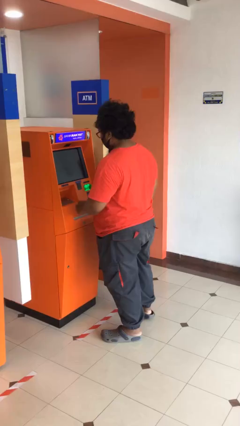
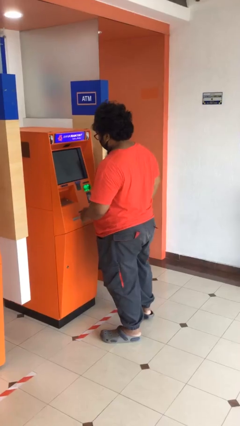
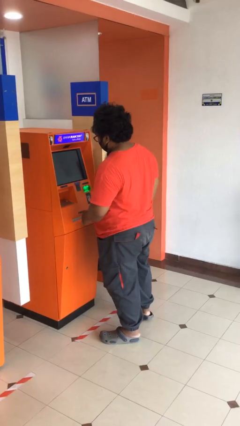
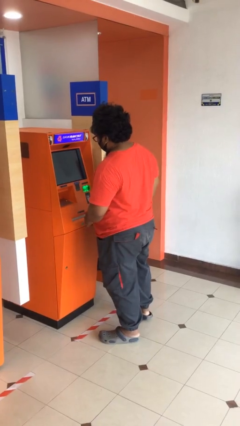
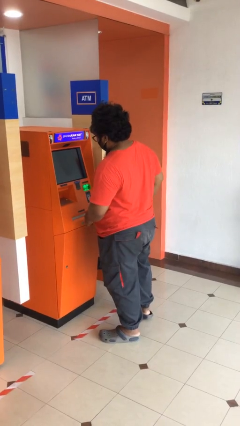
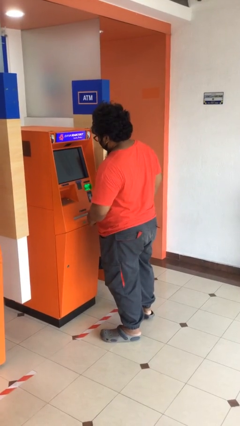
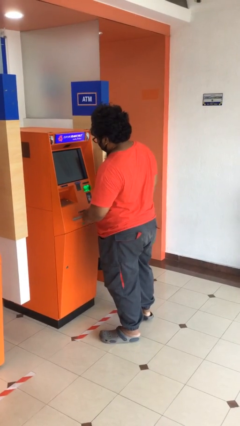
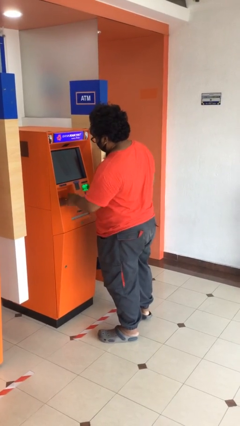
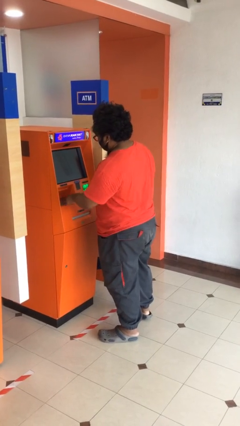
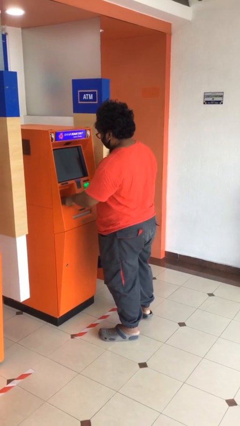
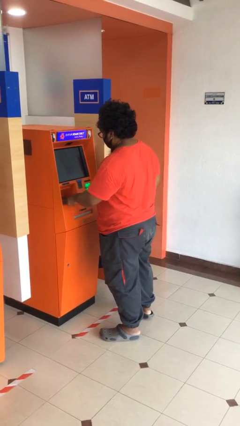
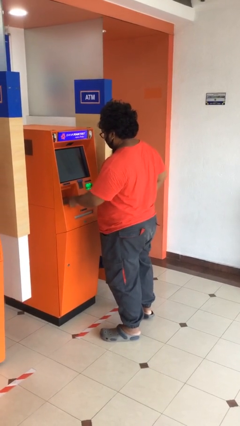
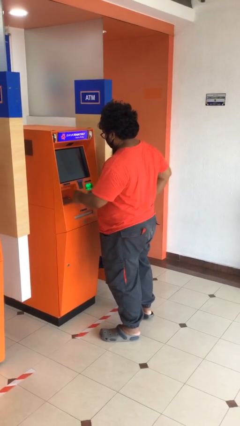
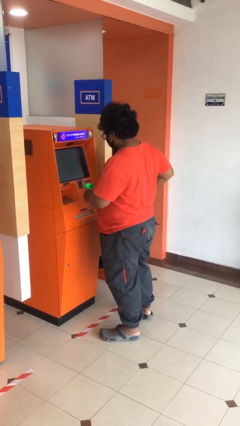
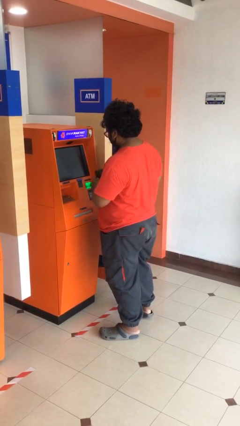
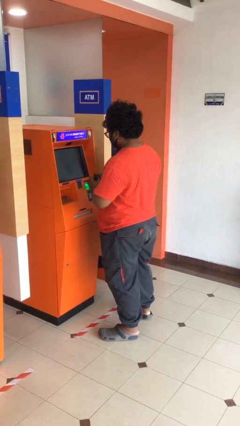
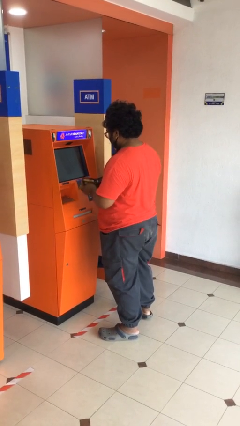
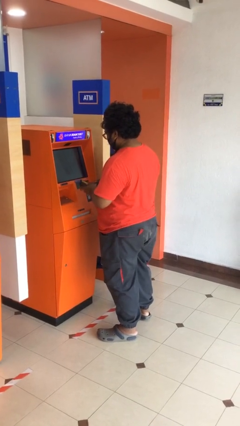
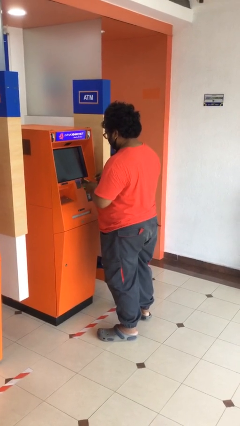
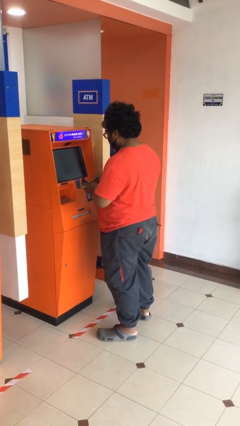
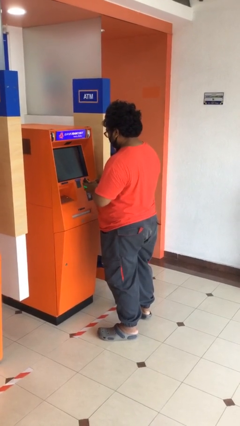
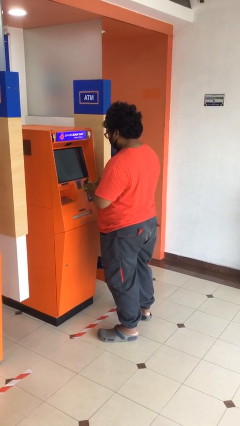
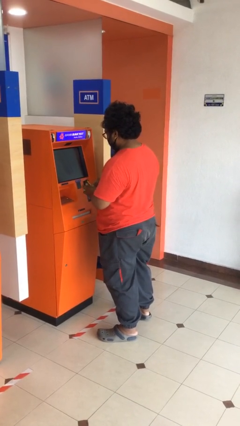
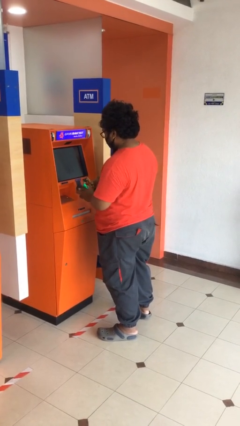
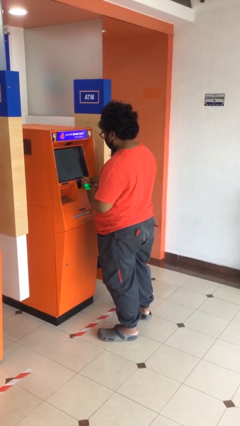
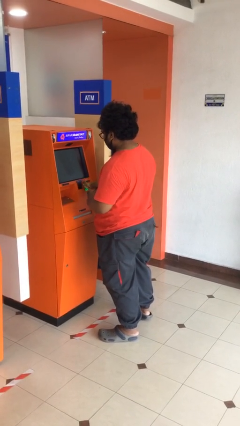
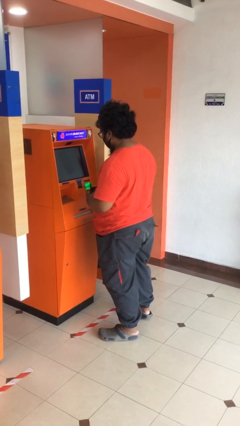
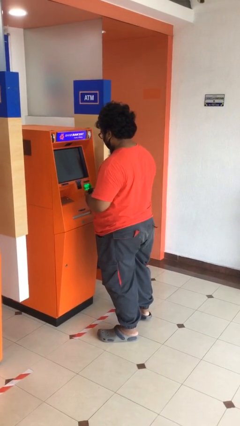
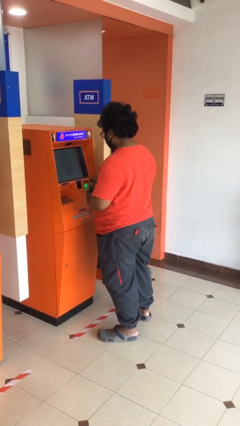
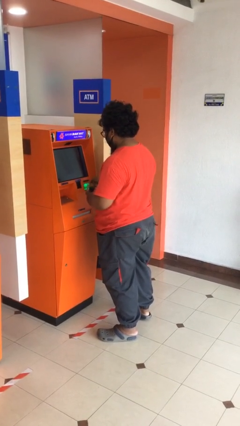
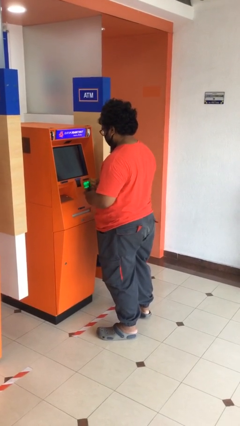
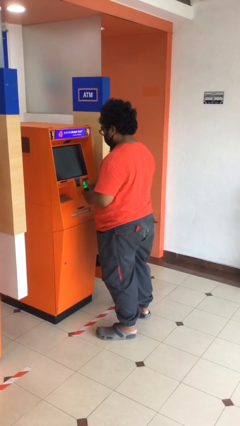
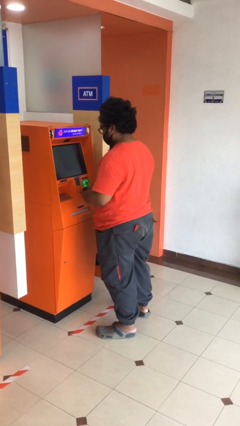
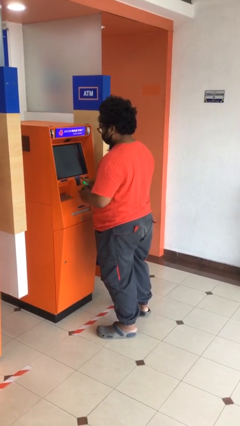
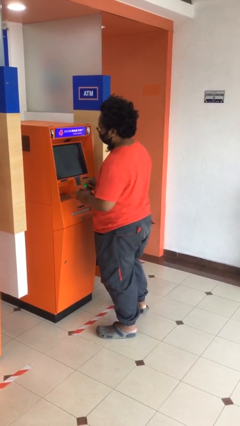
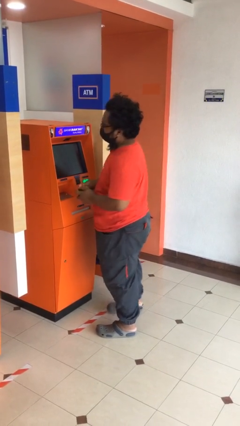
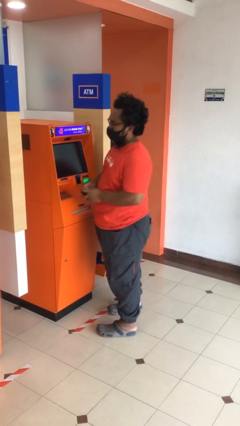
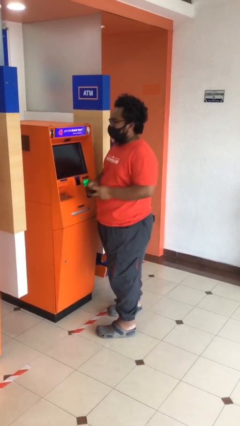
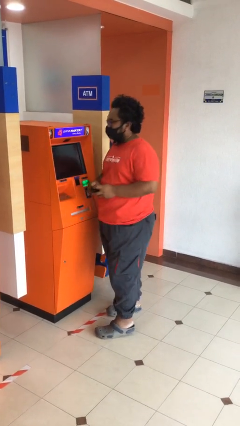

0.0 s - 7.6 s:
person purchases from machine

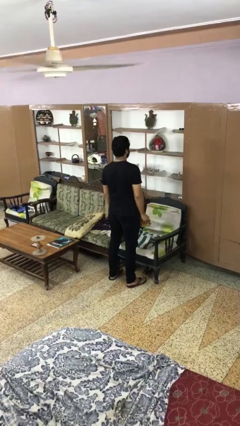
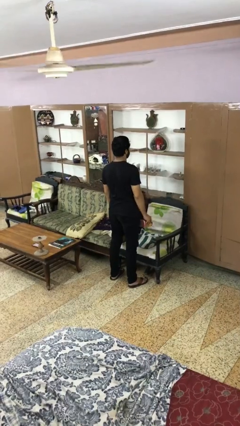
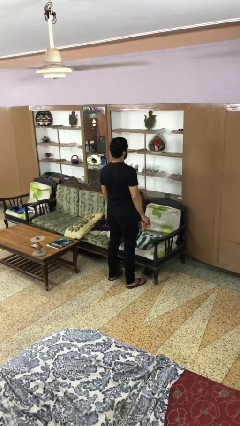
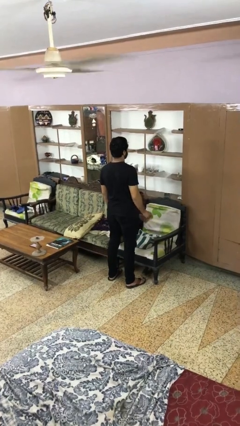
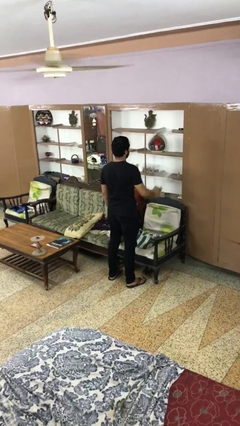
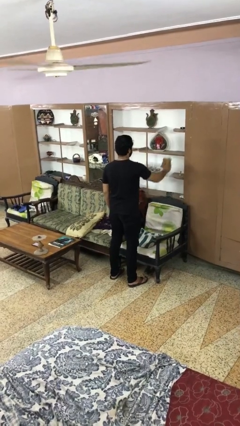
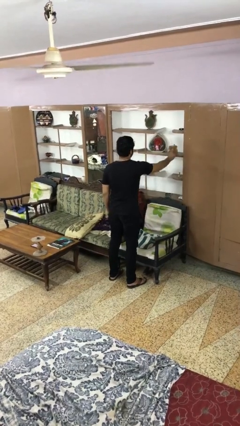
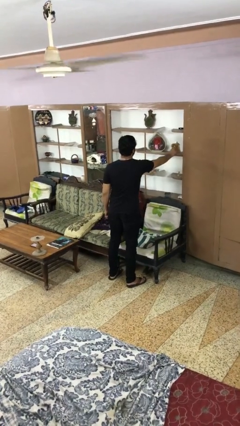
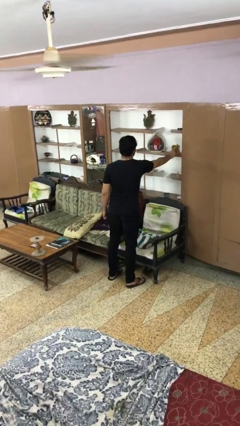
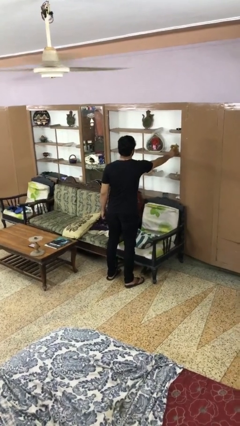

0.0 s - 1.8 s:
person puts down object on shelf

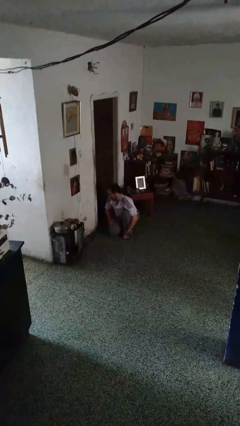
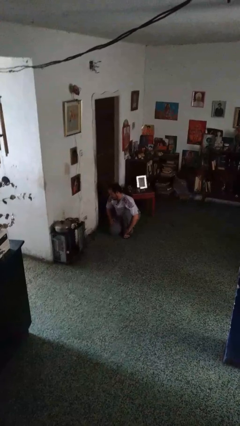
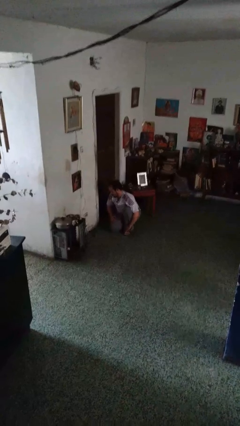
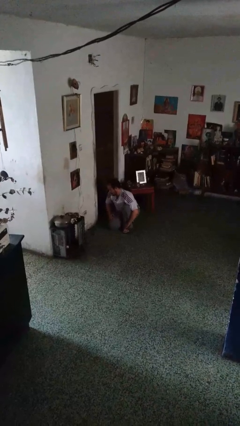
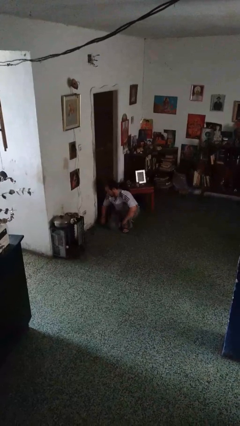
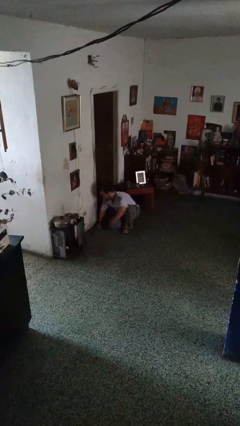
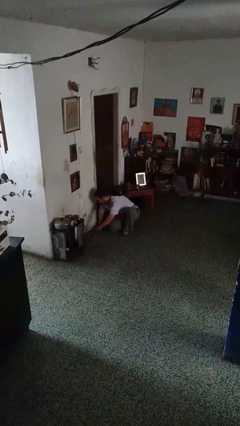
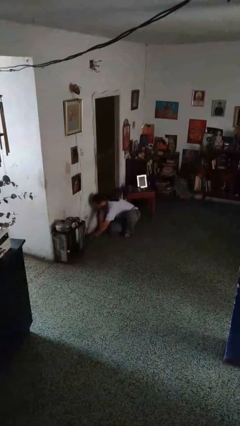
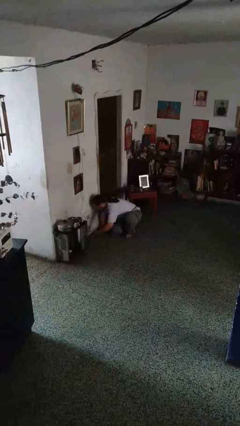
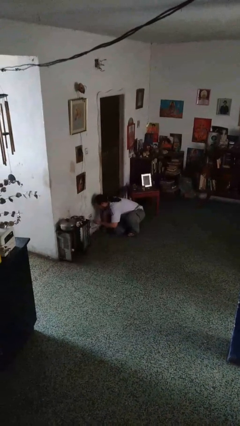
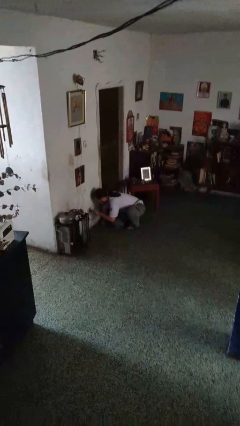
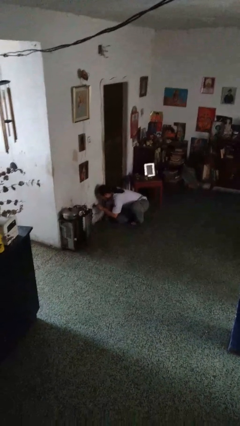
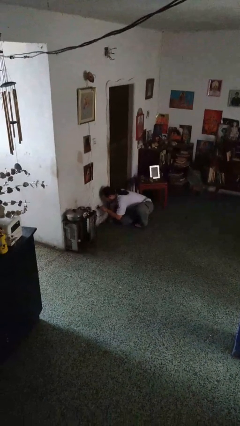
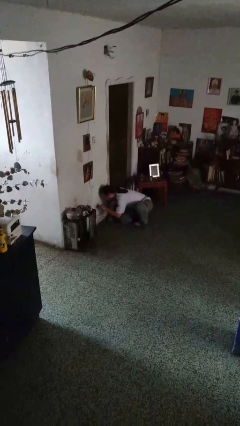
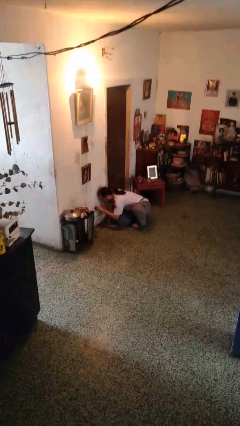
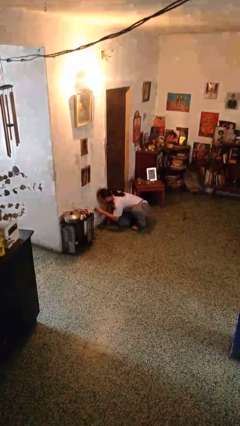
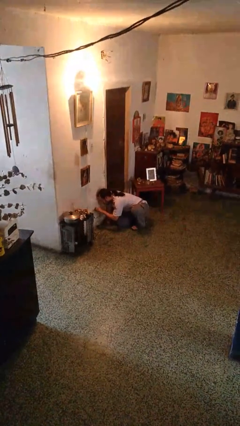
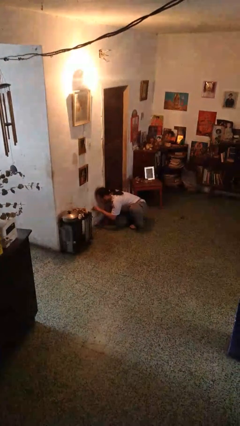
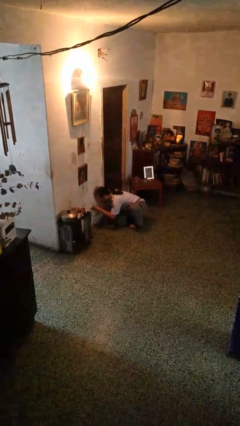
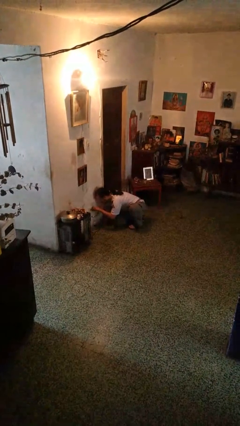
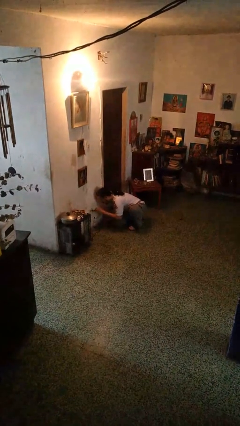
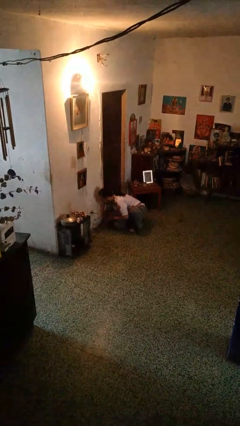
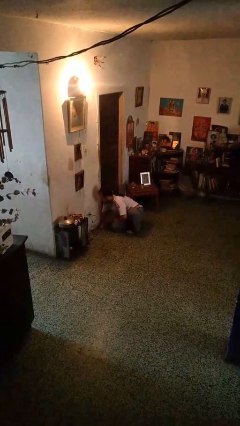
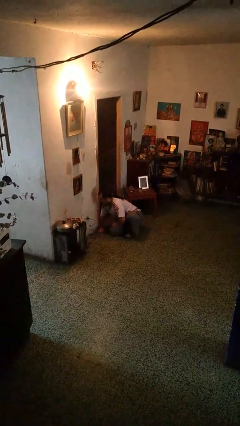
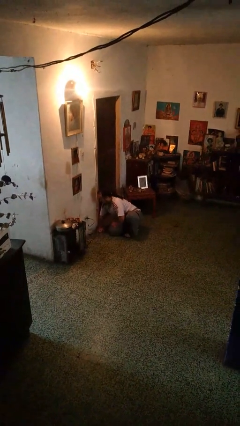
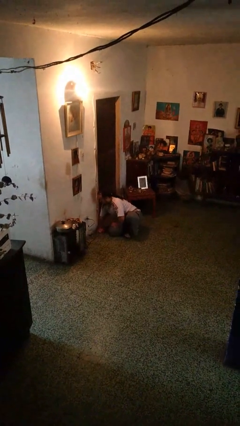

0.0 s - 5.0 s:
person plugs into electrical socket

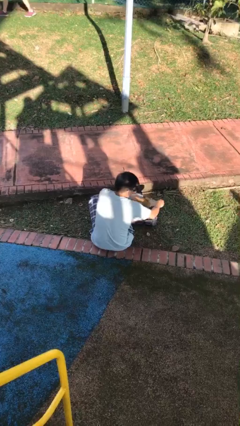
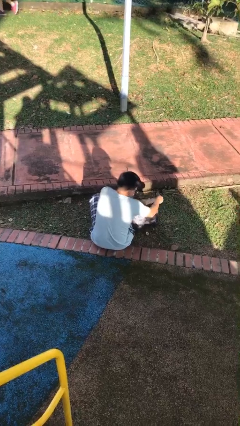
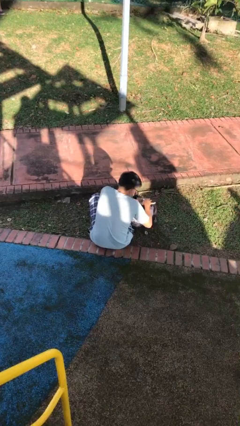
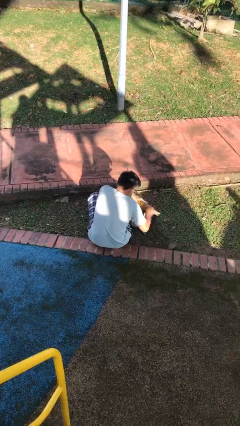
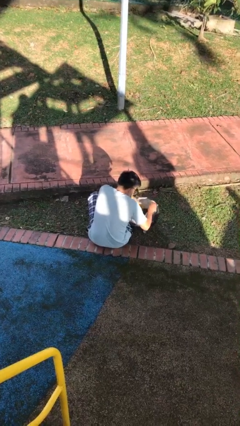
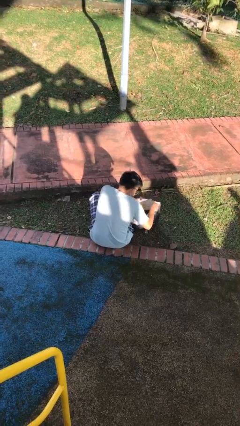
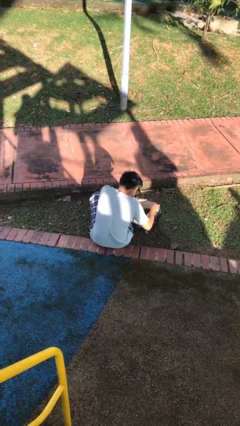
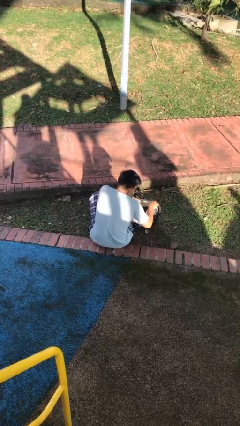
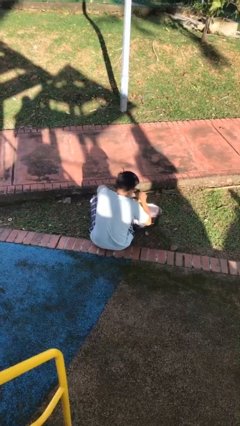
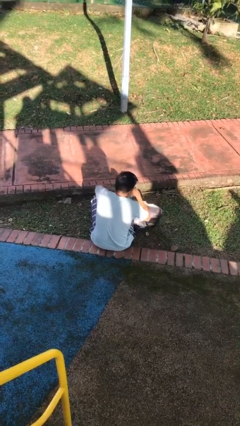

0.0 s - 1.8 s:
person searches in bag

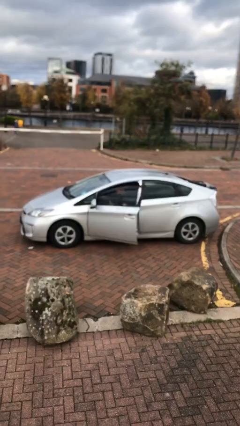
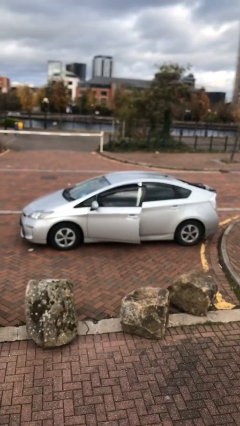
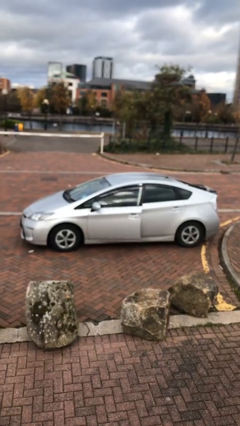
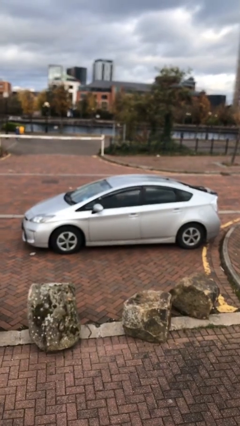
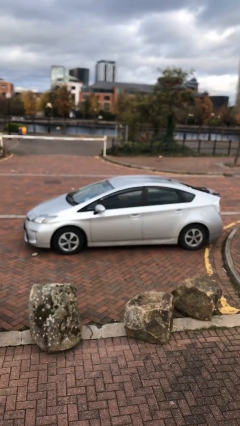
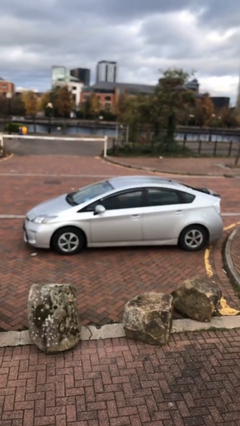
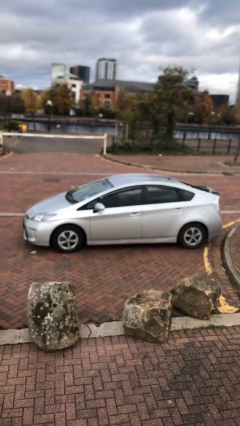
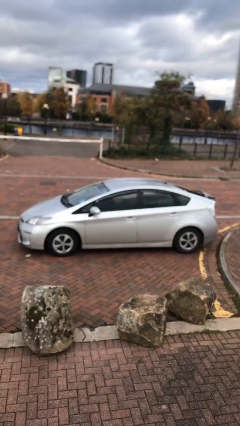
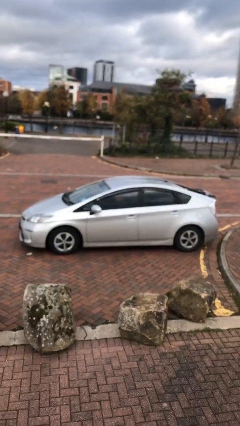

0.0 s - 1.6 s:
person closes car door

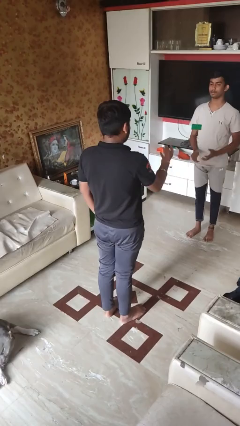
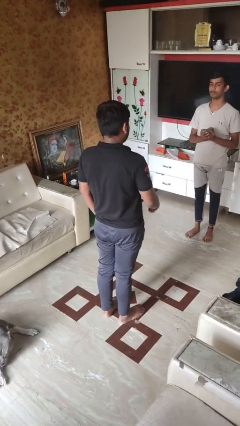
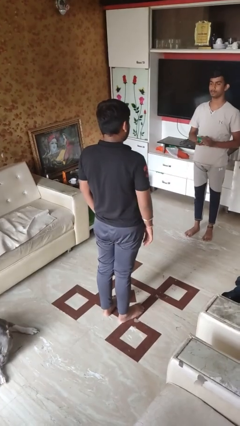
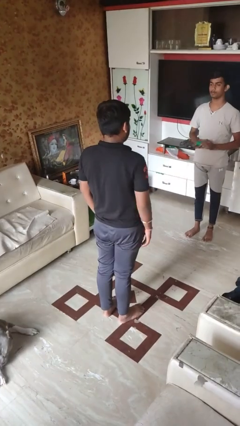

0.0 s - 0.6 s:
person throws object to person
